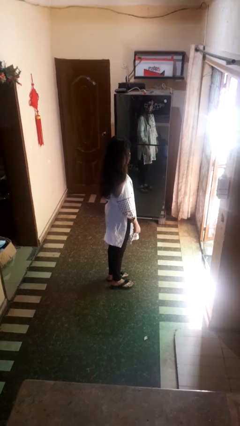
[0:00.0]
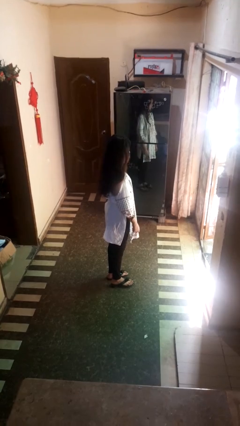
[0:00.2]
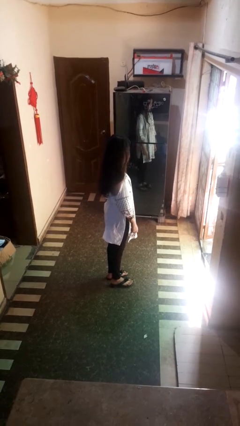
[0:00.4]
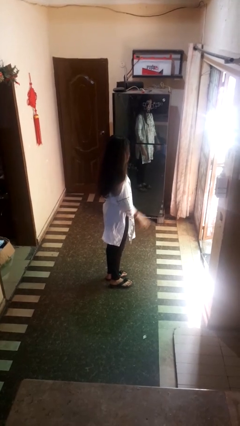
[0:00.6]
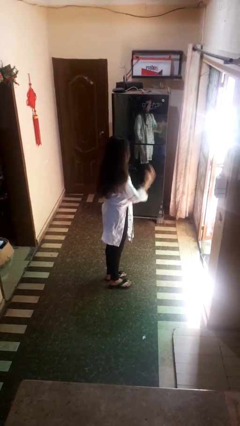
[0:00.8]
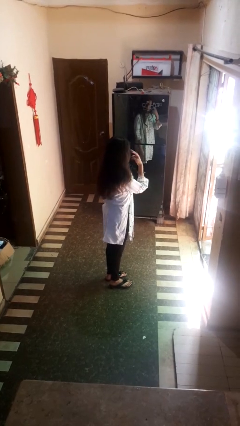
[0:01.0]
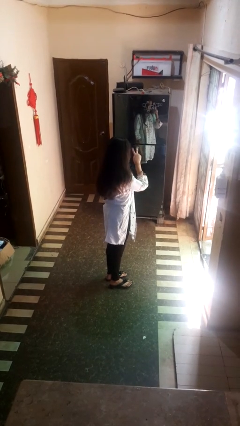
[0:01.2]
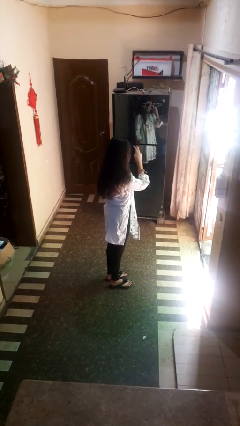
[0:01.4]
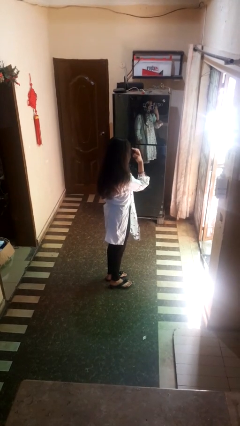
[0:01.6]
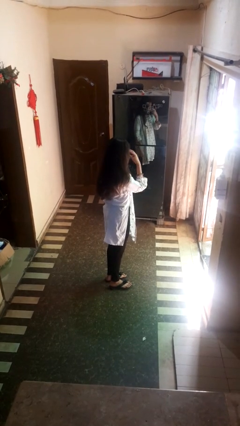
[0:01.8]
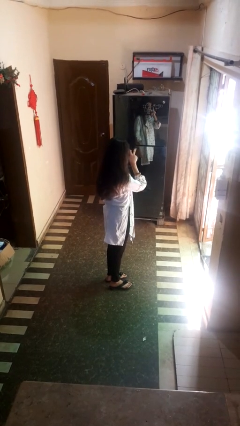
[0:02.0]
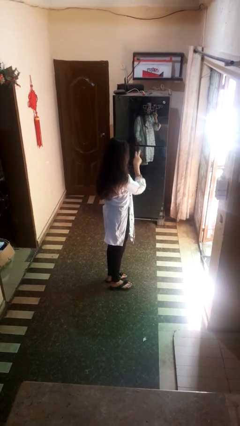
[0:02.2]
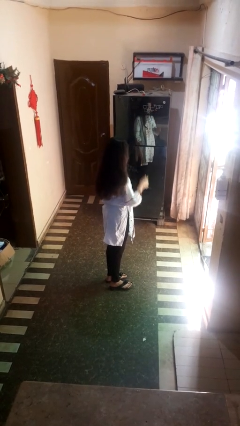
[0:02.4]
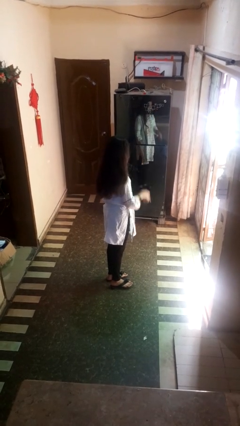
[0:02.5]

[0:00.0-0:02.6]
person gestures watch closely

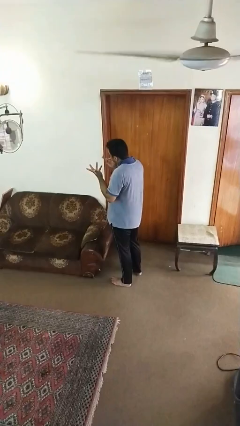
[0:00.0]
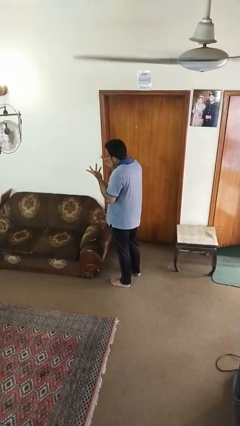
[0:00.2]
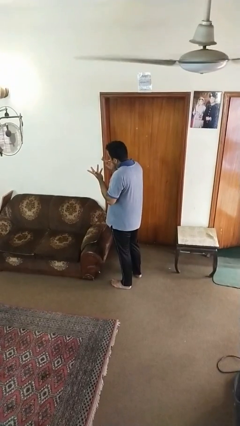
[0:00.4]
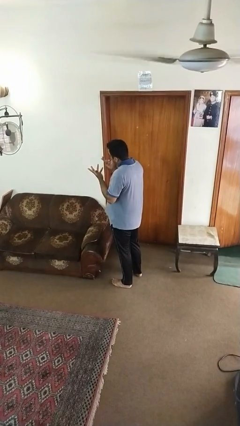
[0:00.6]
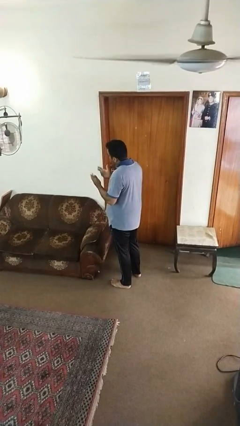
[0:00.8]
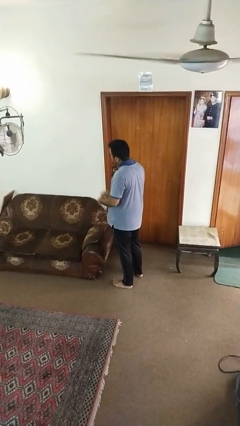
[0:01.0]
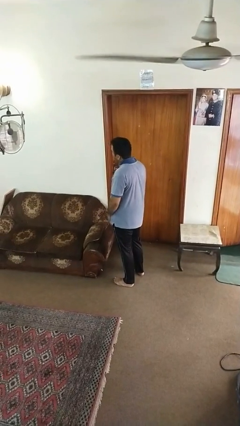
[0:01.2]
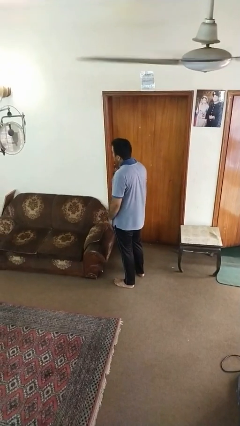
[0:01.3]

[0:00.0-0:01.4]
person shrugs

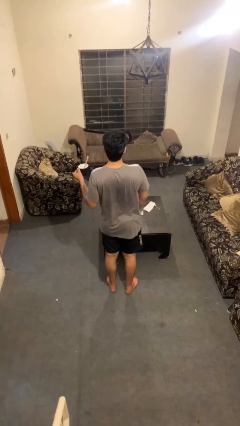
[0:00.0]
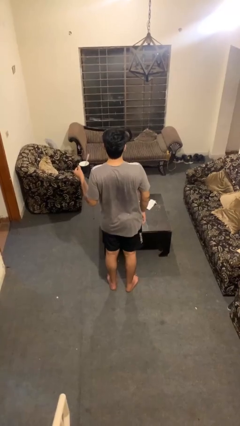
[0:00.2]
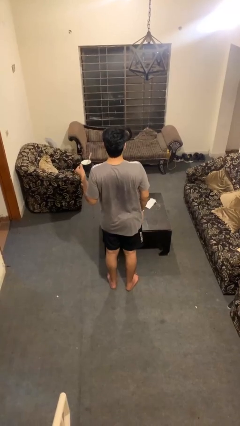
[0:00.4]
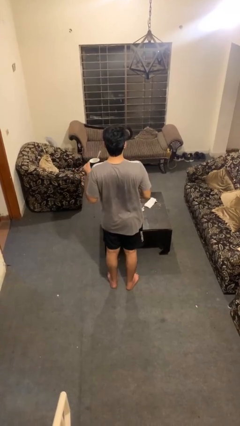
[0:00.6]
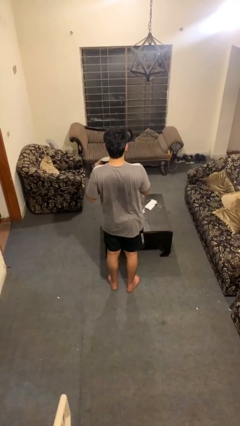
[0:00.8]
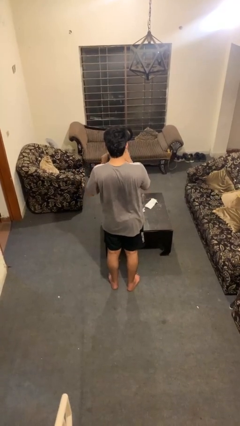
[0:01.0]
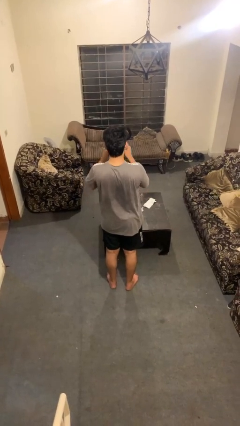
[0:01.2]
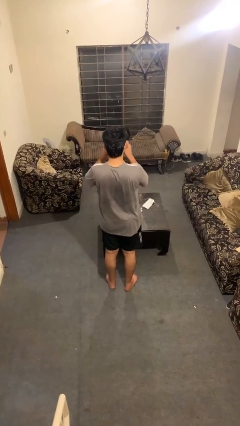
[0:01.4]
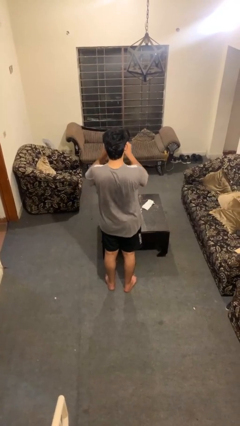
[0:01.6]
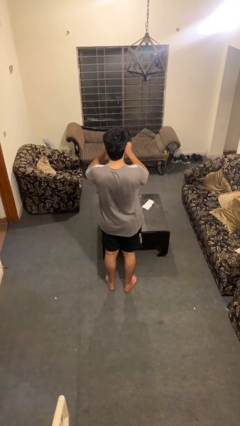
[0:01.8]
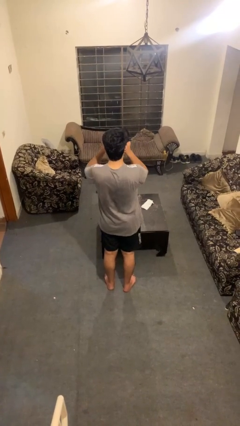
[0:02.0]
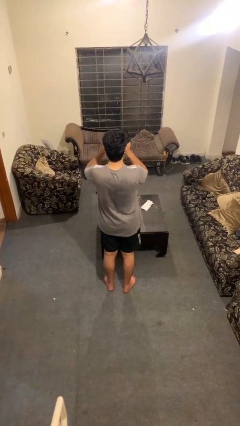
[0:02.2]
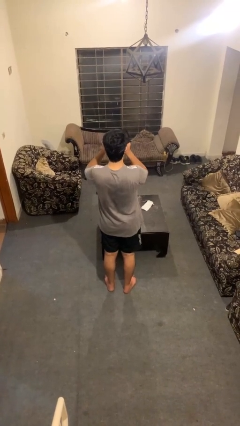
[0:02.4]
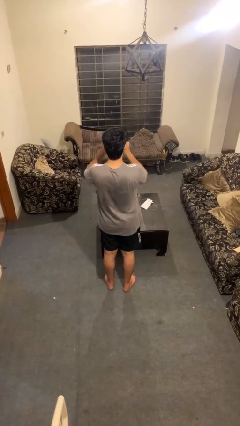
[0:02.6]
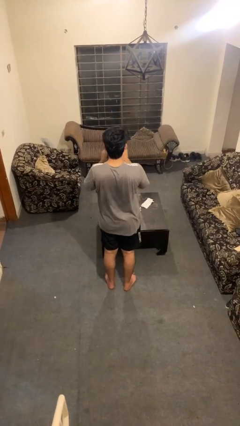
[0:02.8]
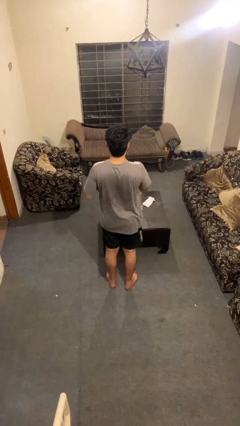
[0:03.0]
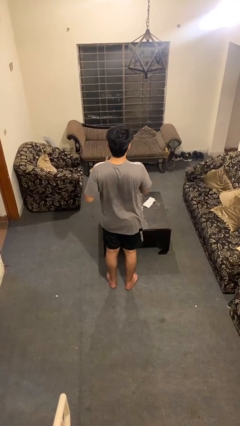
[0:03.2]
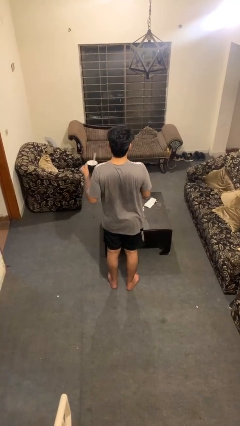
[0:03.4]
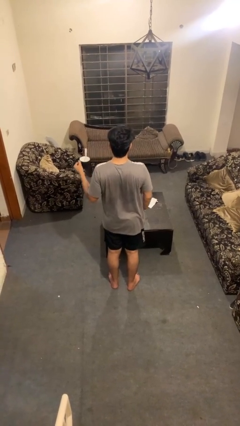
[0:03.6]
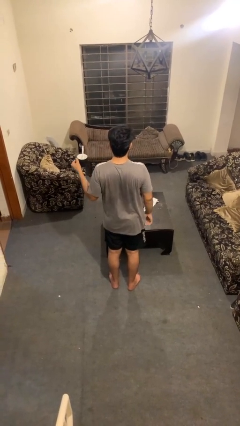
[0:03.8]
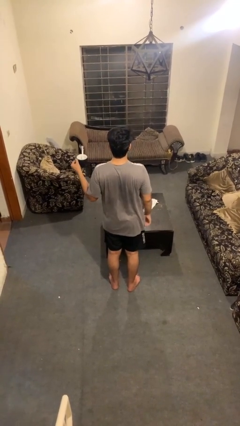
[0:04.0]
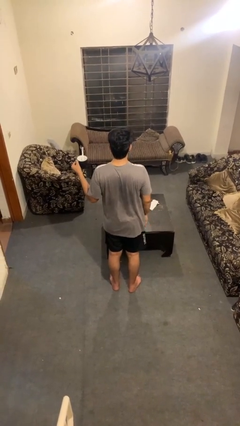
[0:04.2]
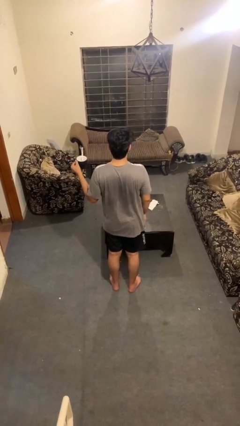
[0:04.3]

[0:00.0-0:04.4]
person drinks from mug

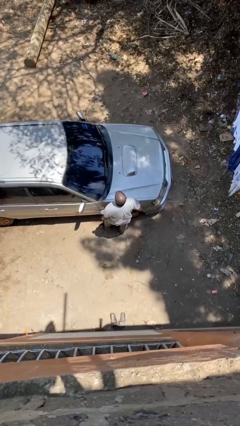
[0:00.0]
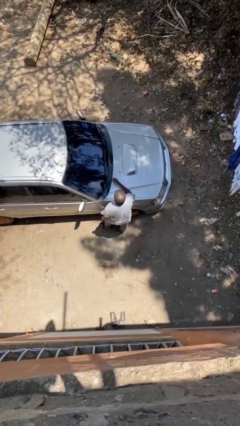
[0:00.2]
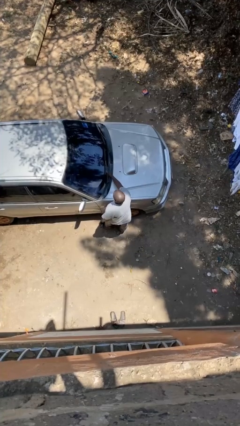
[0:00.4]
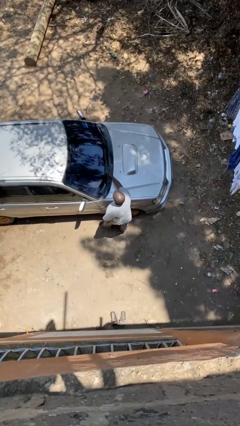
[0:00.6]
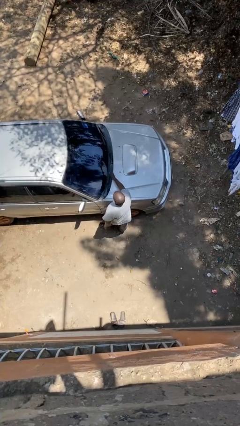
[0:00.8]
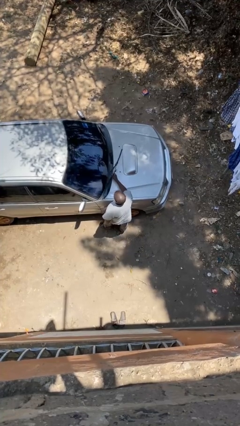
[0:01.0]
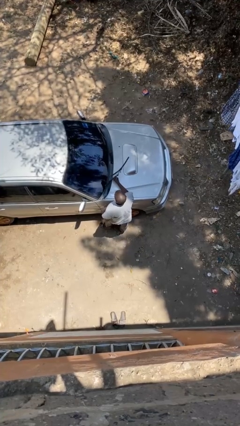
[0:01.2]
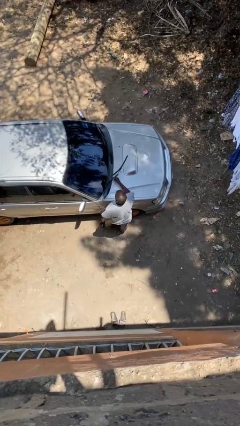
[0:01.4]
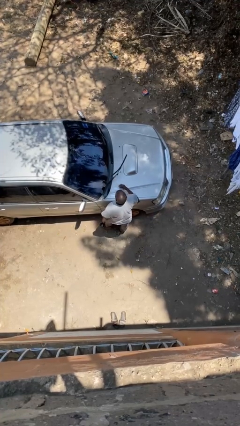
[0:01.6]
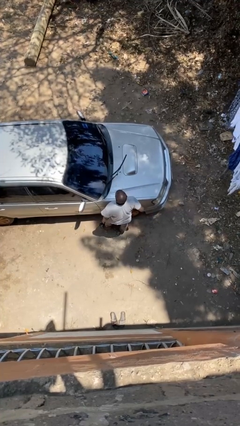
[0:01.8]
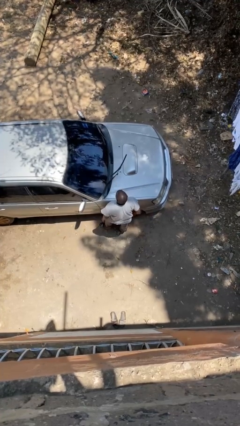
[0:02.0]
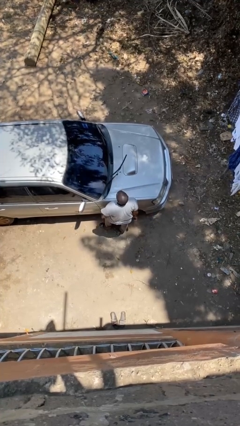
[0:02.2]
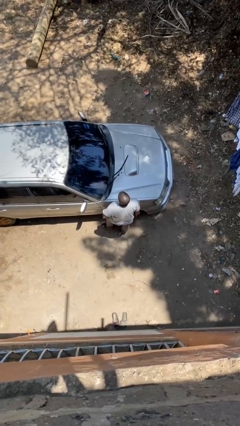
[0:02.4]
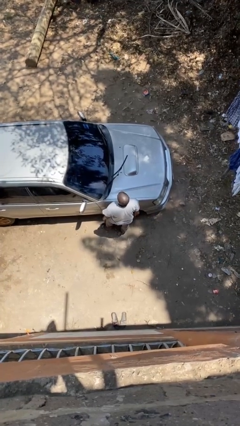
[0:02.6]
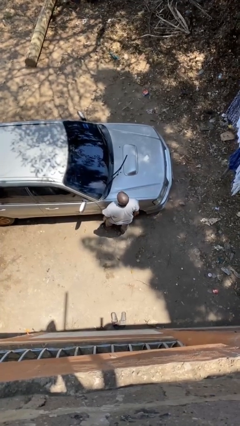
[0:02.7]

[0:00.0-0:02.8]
person flips up car wipers

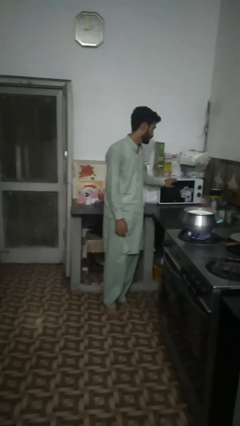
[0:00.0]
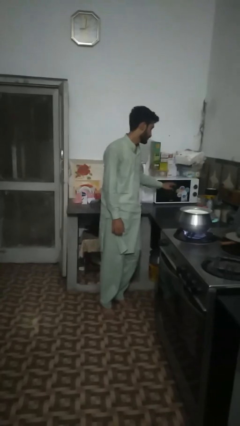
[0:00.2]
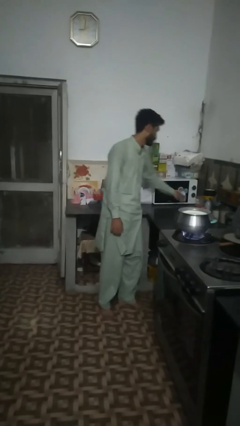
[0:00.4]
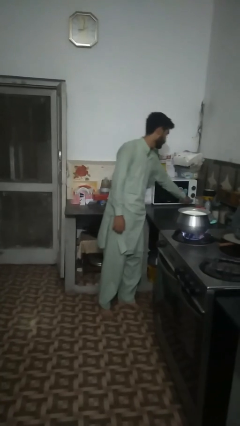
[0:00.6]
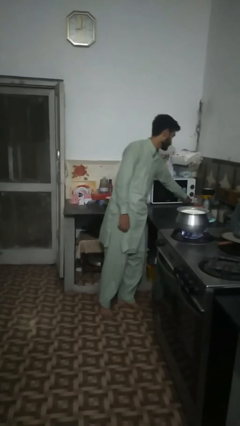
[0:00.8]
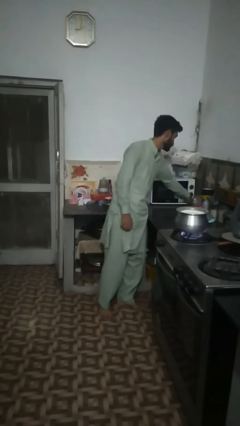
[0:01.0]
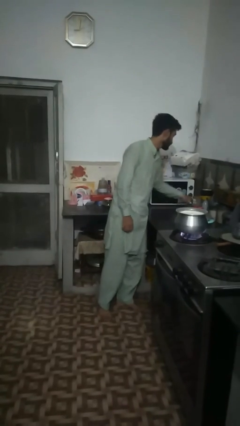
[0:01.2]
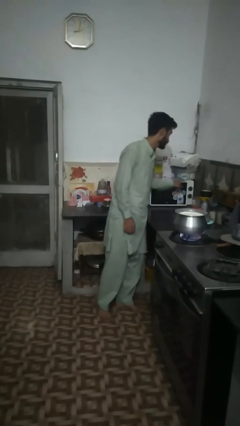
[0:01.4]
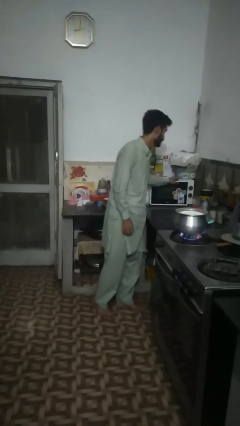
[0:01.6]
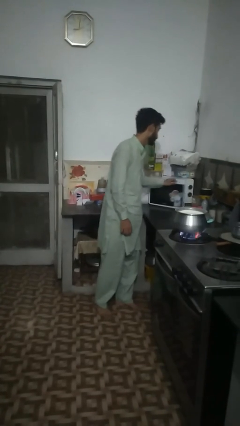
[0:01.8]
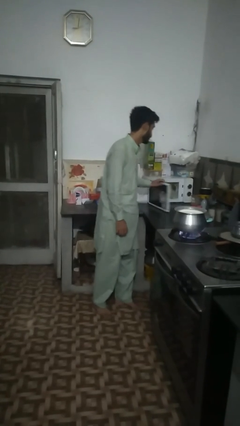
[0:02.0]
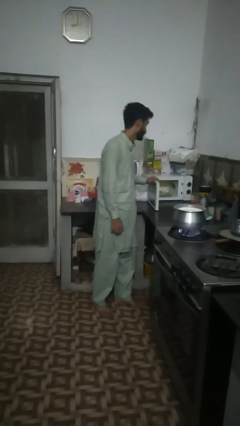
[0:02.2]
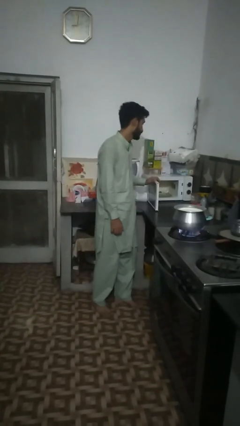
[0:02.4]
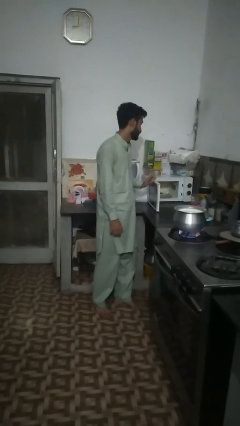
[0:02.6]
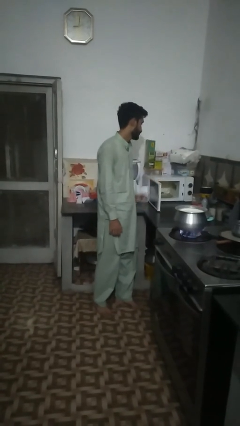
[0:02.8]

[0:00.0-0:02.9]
person opens microwave

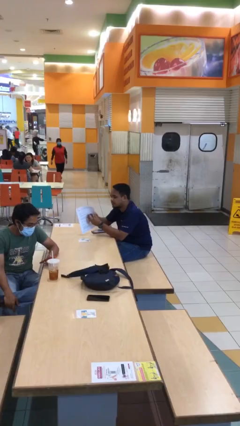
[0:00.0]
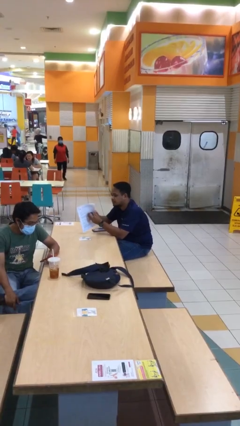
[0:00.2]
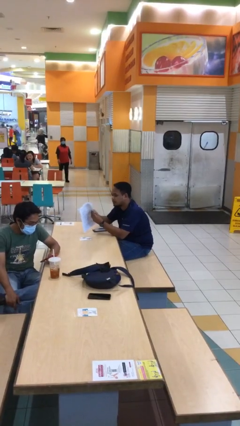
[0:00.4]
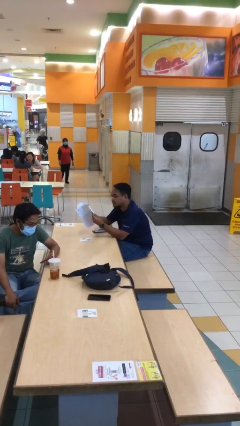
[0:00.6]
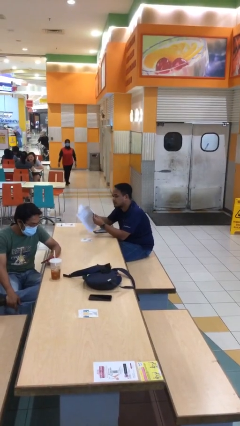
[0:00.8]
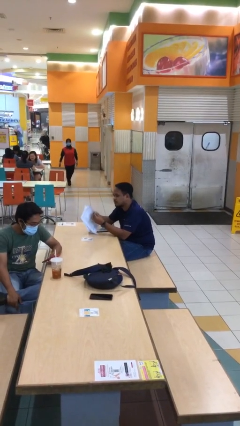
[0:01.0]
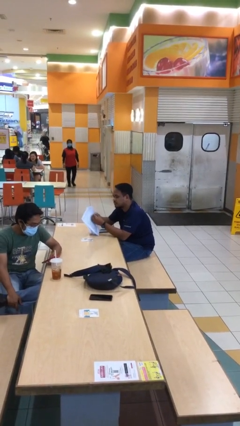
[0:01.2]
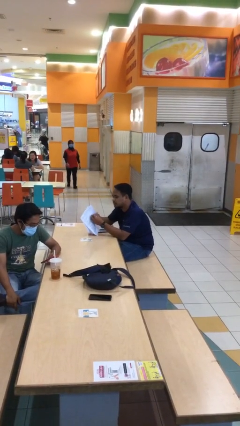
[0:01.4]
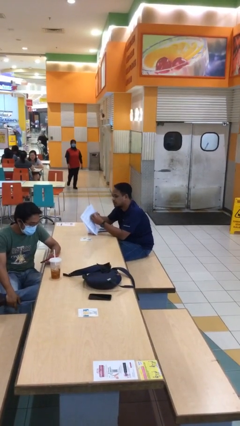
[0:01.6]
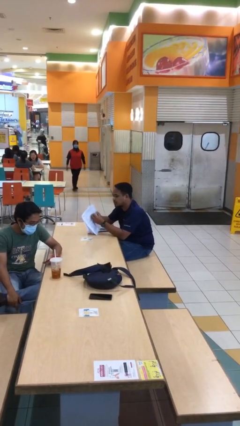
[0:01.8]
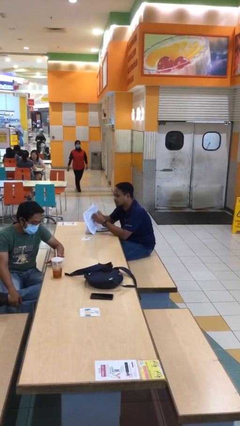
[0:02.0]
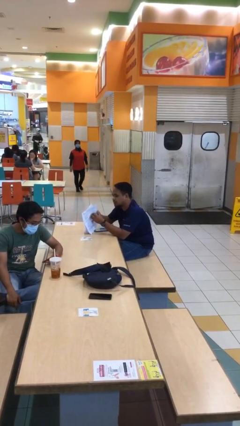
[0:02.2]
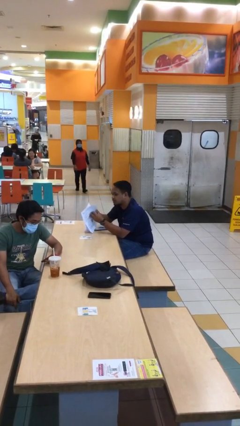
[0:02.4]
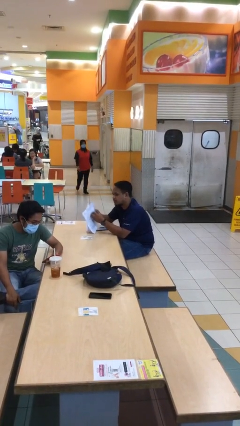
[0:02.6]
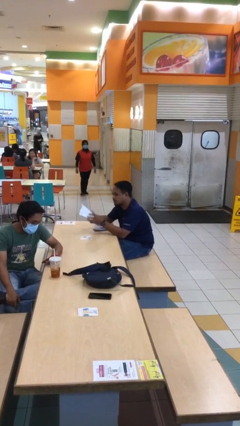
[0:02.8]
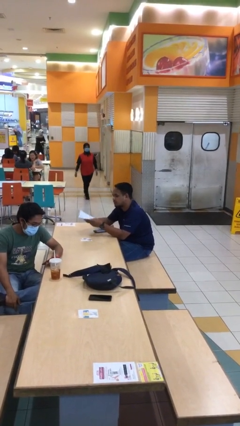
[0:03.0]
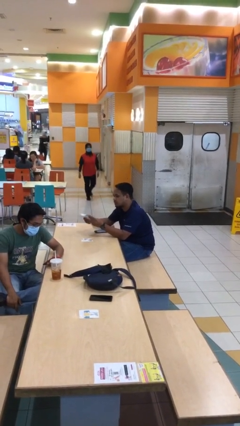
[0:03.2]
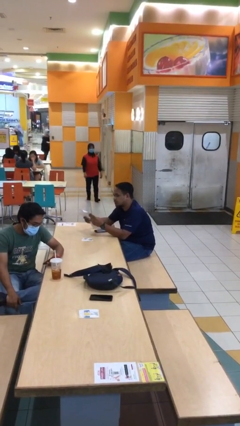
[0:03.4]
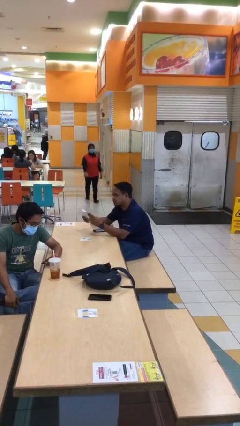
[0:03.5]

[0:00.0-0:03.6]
person reads document
